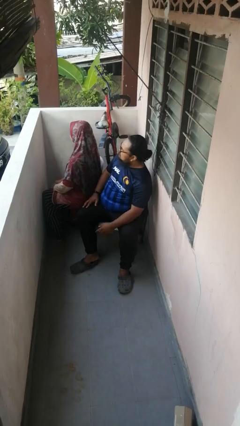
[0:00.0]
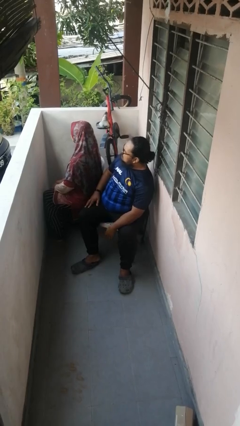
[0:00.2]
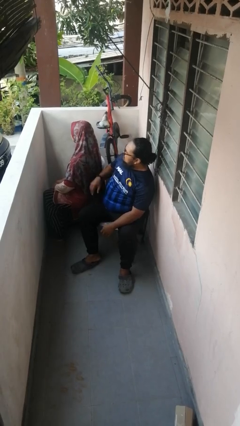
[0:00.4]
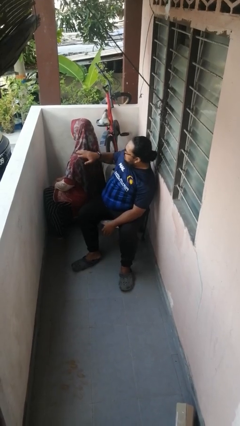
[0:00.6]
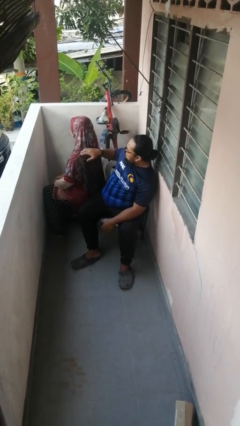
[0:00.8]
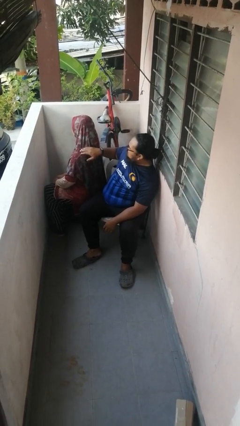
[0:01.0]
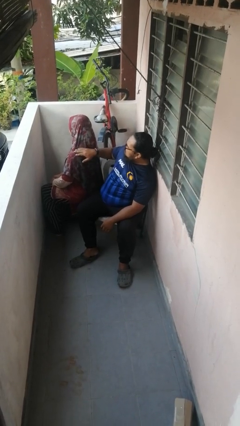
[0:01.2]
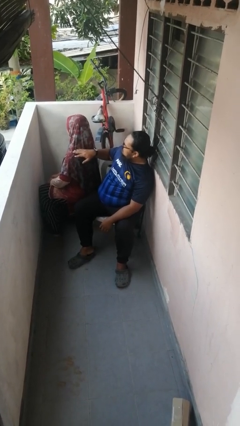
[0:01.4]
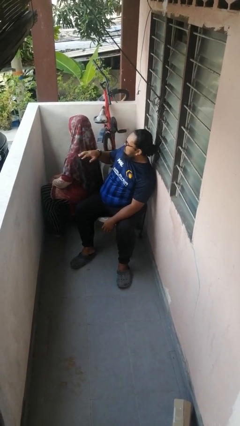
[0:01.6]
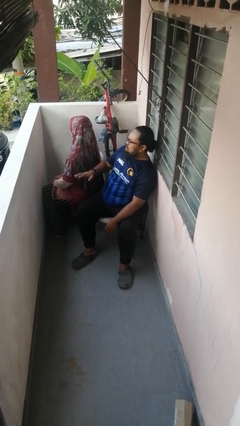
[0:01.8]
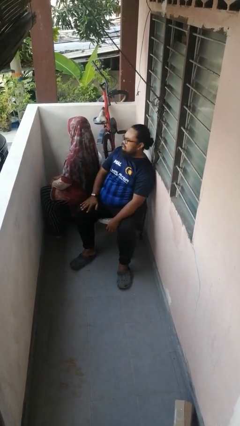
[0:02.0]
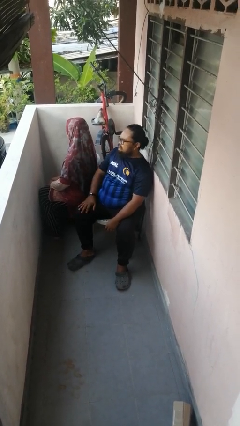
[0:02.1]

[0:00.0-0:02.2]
person touches back of person

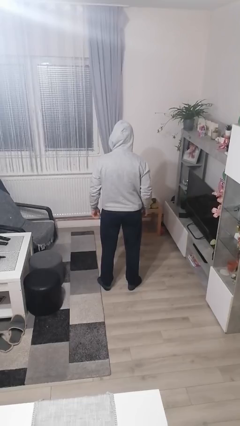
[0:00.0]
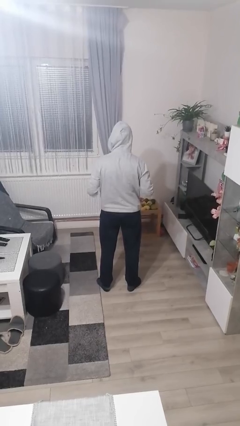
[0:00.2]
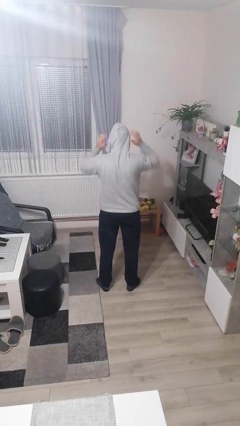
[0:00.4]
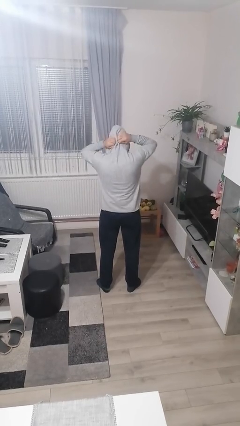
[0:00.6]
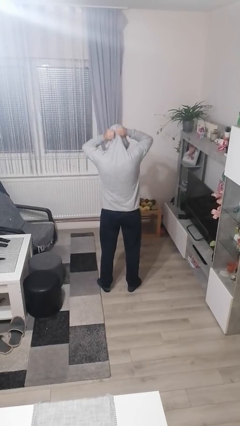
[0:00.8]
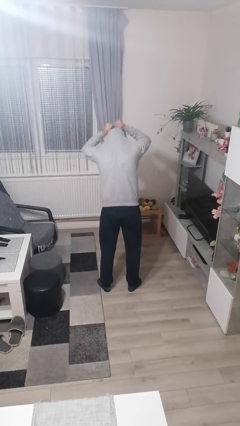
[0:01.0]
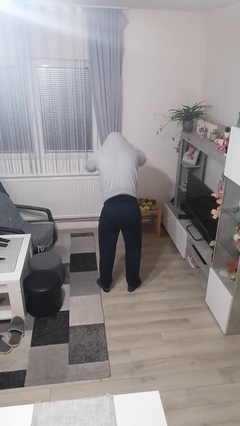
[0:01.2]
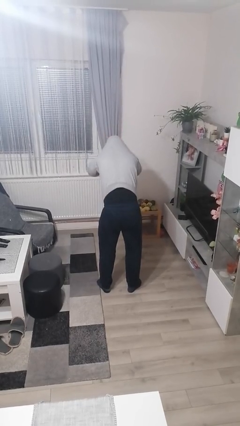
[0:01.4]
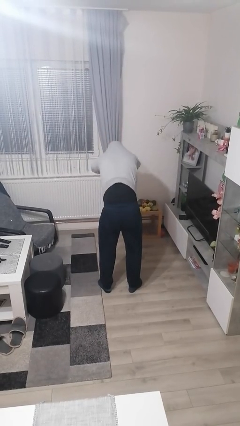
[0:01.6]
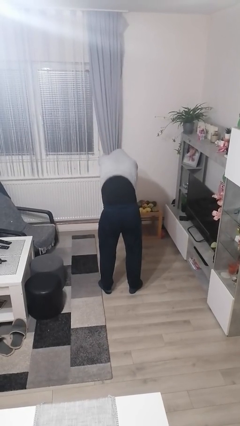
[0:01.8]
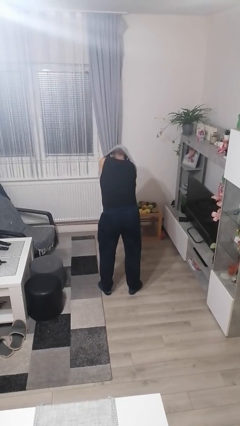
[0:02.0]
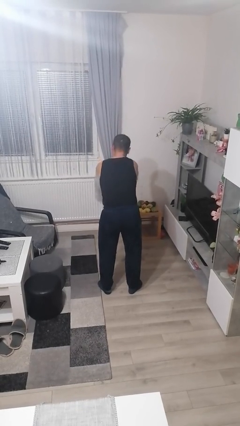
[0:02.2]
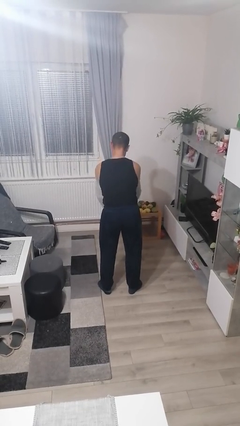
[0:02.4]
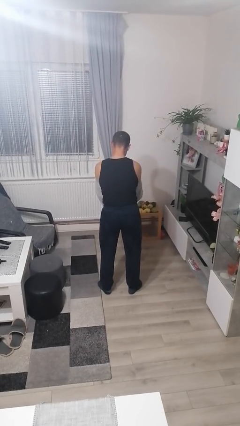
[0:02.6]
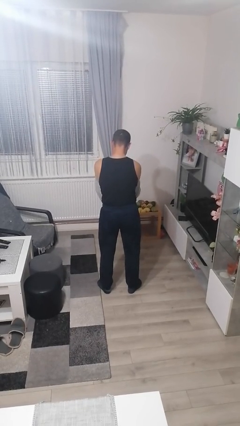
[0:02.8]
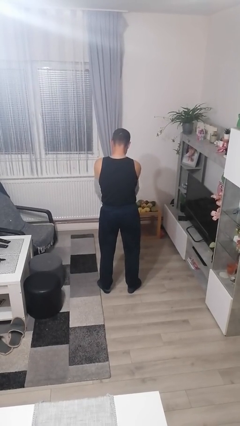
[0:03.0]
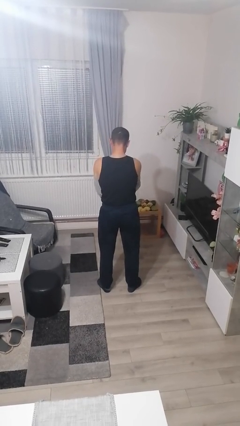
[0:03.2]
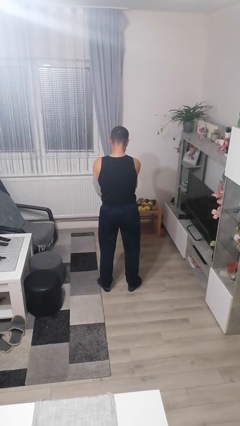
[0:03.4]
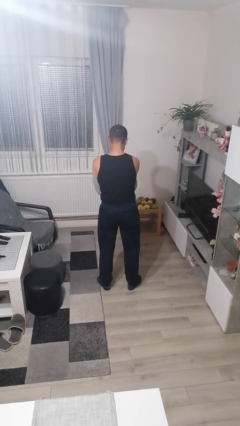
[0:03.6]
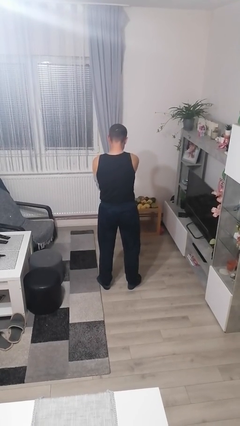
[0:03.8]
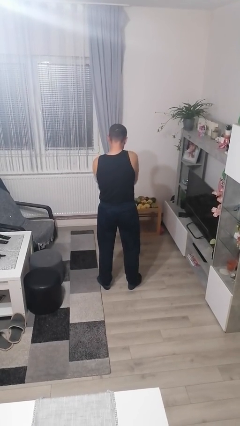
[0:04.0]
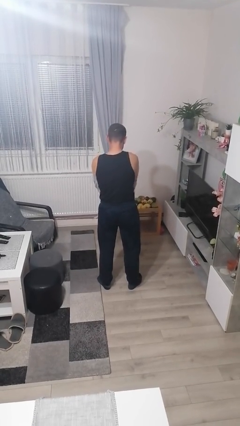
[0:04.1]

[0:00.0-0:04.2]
person takes off hoodie

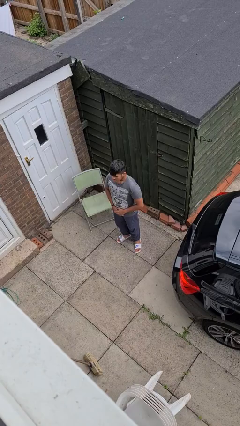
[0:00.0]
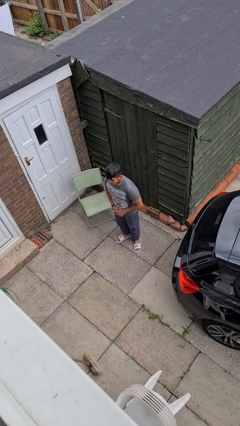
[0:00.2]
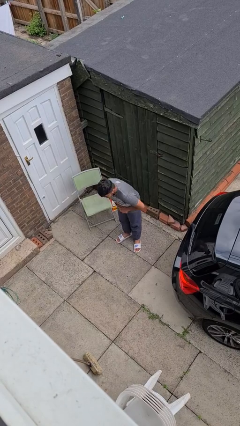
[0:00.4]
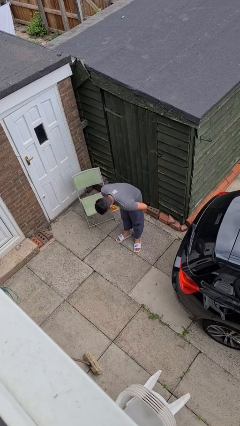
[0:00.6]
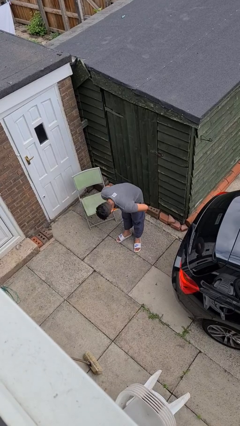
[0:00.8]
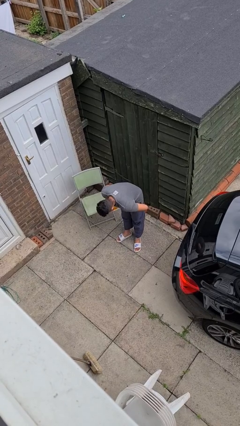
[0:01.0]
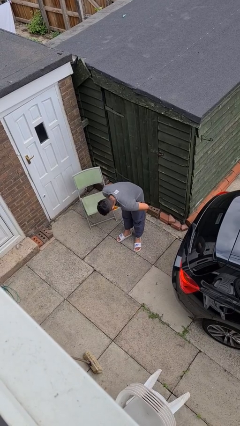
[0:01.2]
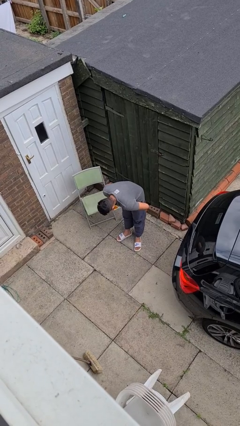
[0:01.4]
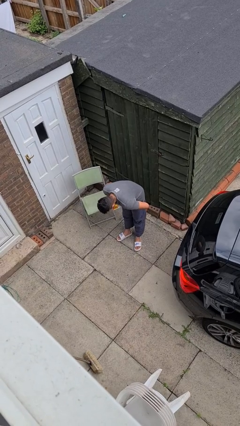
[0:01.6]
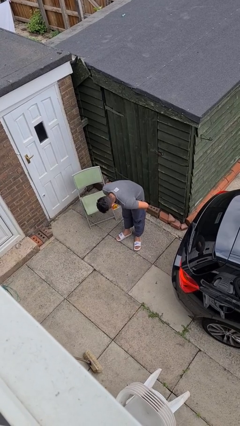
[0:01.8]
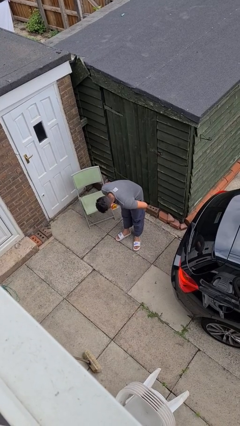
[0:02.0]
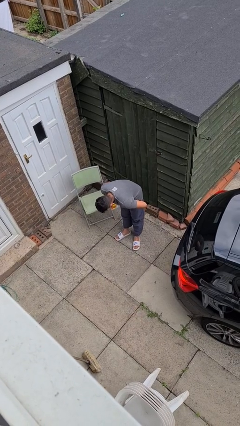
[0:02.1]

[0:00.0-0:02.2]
person bows

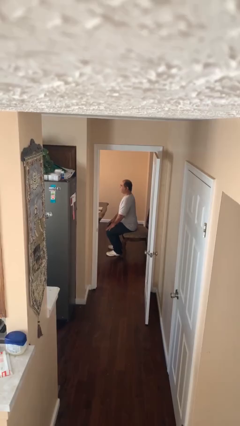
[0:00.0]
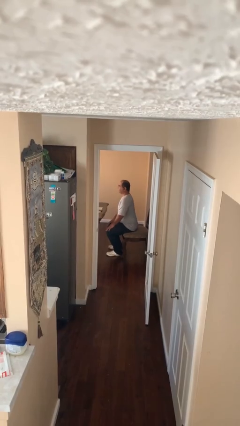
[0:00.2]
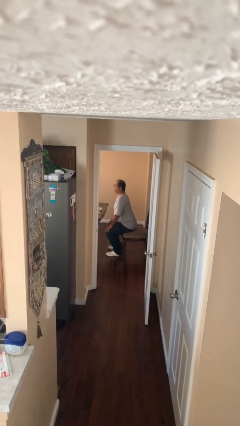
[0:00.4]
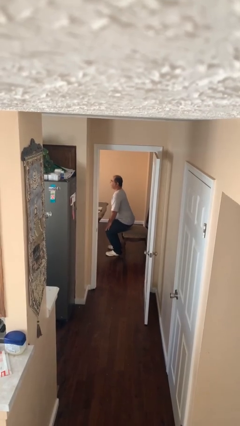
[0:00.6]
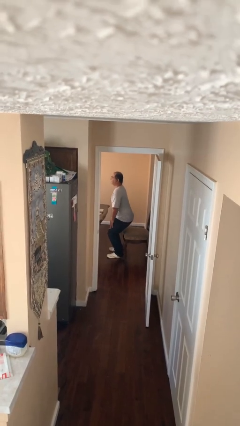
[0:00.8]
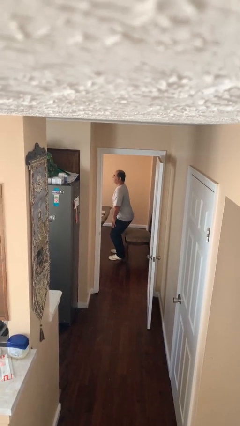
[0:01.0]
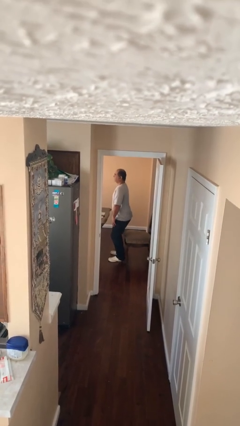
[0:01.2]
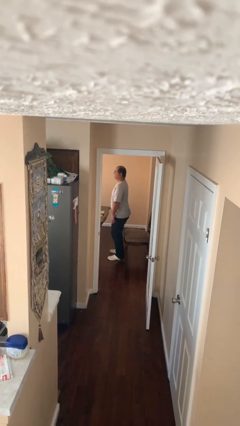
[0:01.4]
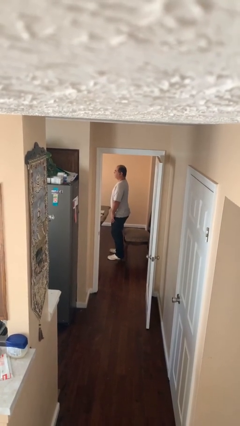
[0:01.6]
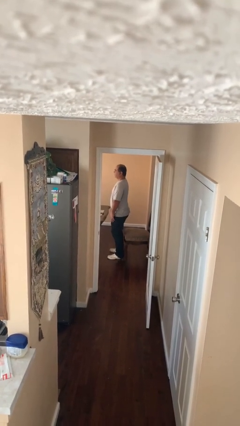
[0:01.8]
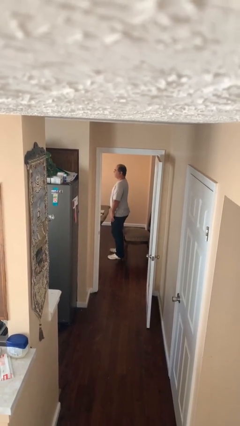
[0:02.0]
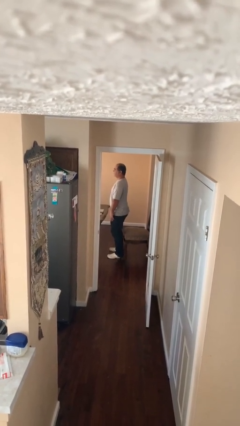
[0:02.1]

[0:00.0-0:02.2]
person stands up

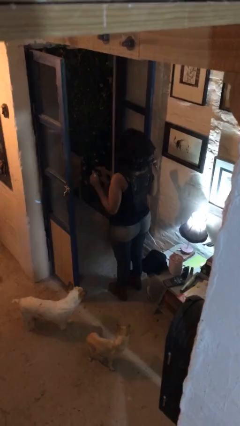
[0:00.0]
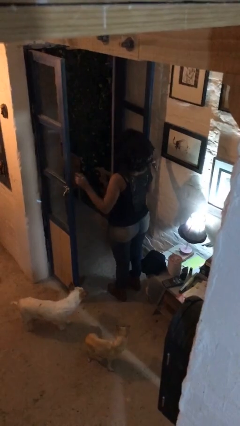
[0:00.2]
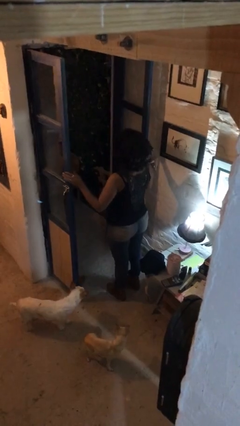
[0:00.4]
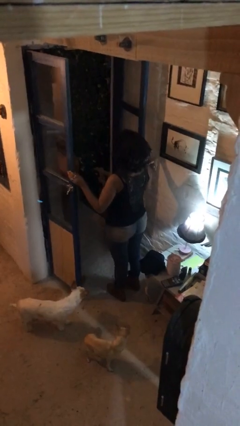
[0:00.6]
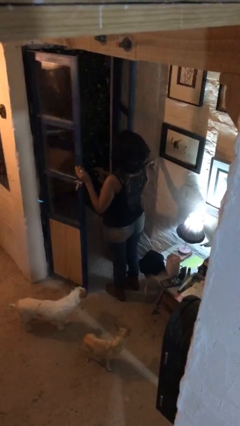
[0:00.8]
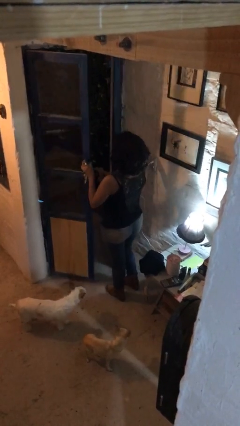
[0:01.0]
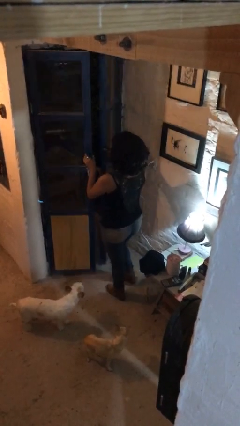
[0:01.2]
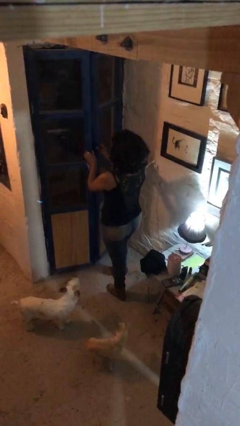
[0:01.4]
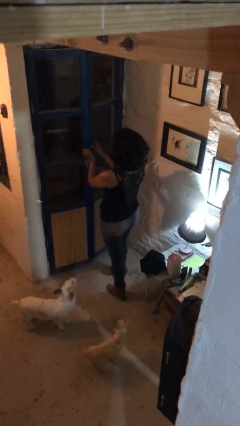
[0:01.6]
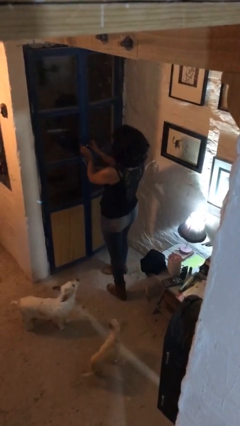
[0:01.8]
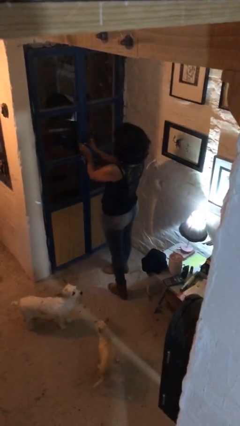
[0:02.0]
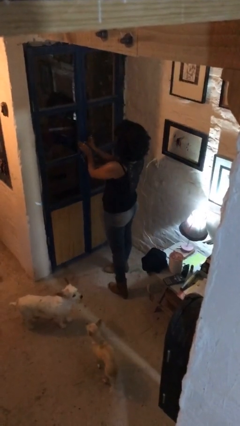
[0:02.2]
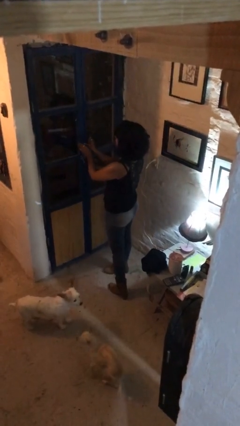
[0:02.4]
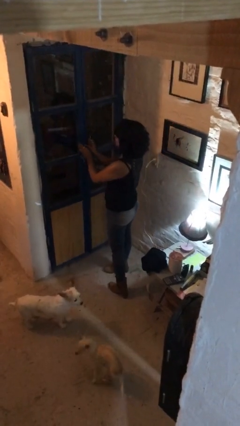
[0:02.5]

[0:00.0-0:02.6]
person closes facility door

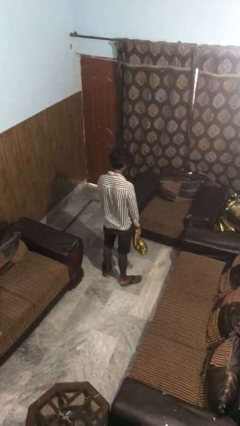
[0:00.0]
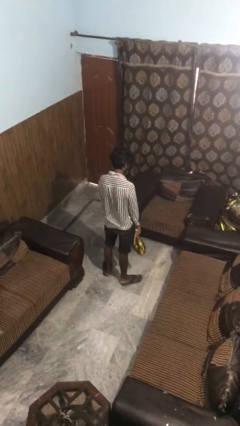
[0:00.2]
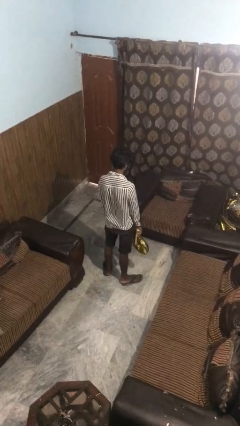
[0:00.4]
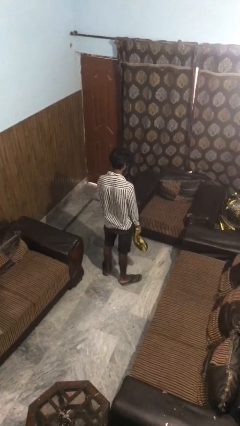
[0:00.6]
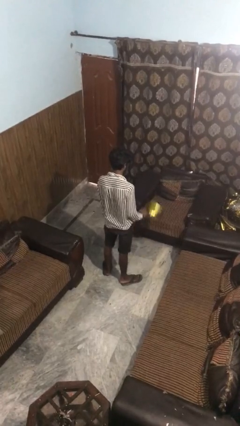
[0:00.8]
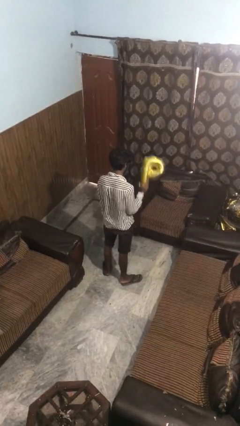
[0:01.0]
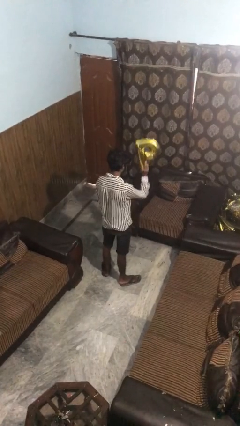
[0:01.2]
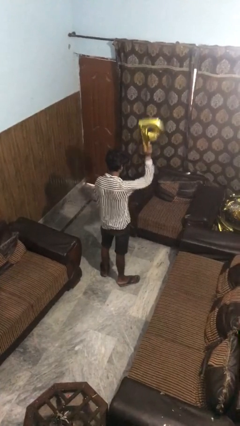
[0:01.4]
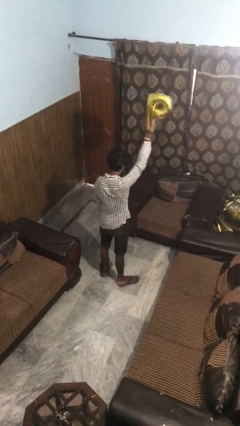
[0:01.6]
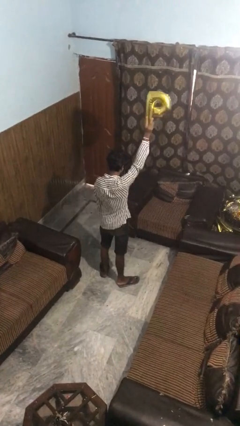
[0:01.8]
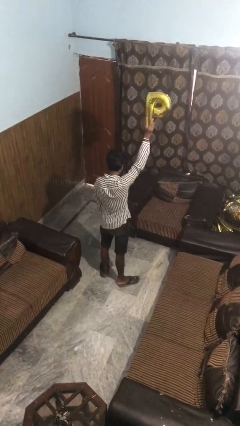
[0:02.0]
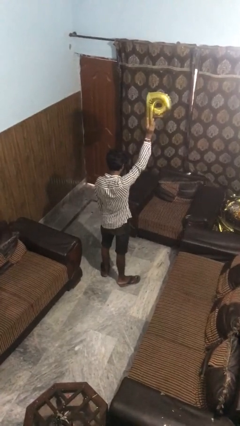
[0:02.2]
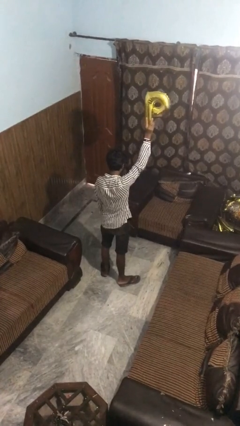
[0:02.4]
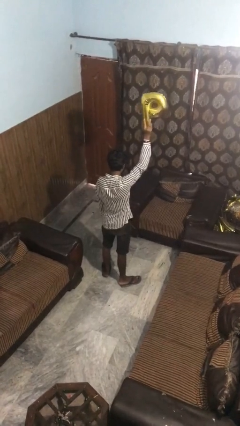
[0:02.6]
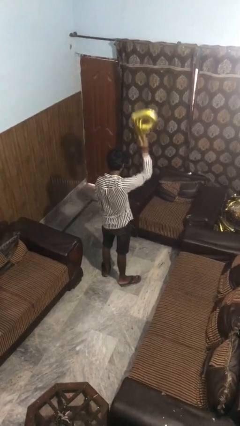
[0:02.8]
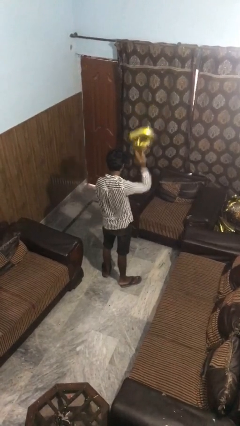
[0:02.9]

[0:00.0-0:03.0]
person holds object above head

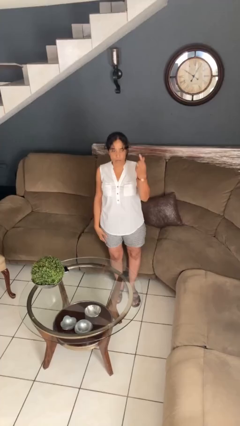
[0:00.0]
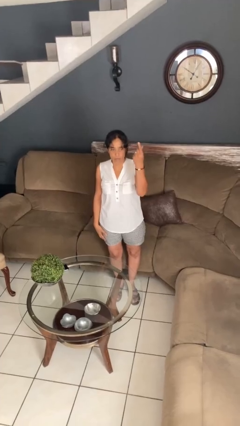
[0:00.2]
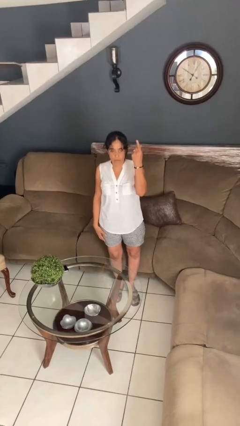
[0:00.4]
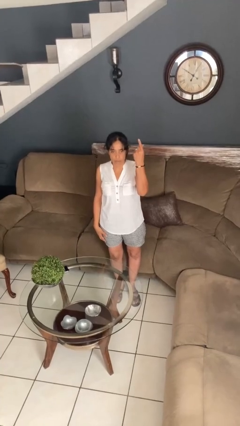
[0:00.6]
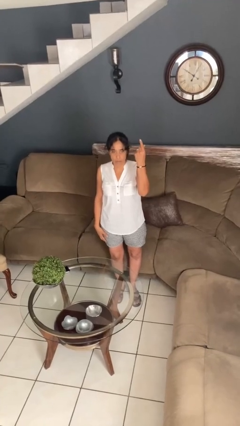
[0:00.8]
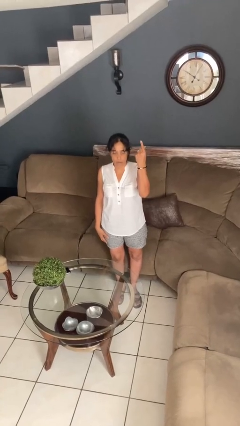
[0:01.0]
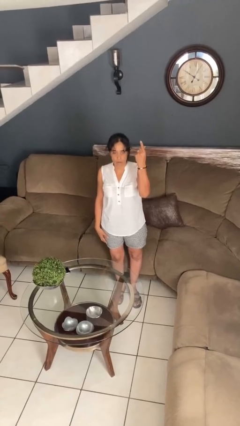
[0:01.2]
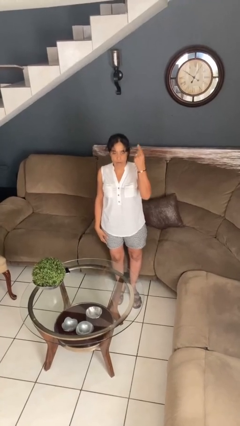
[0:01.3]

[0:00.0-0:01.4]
person gestures number one
